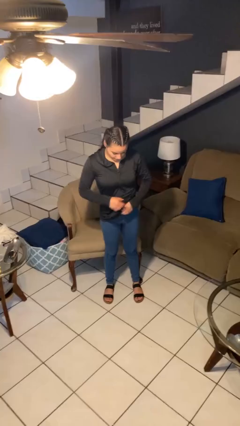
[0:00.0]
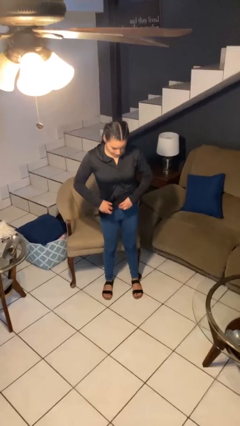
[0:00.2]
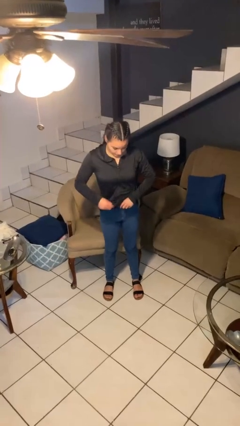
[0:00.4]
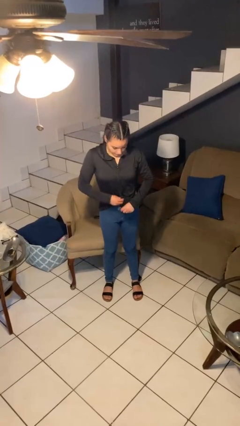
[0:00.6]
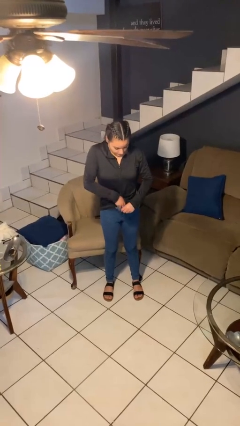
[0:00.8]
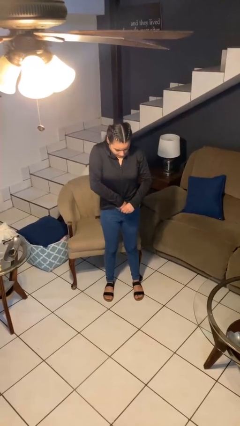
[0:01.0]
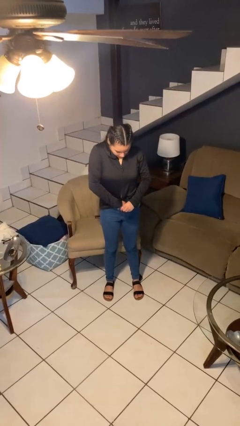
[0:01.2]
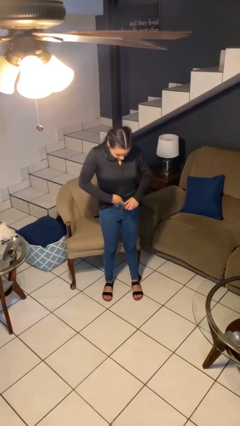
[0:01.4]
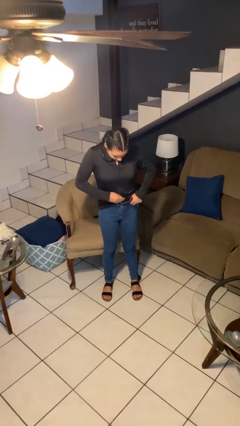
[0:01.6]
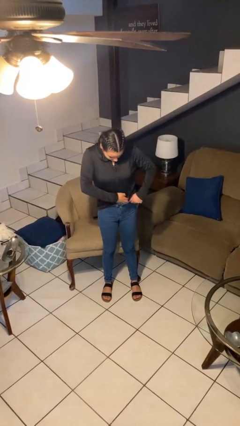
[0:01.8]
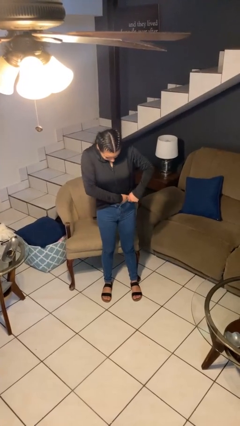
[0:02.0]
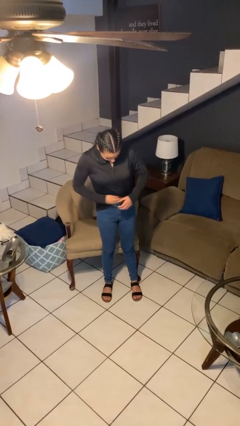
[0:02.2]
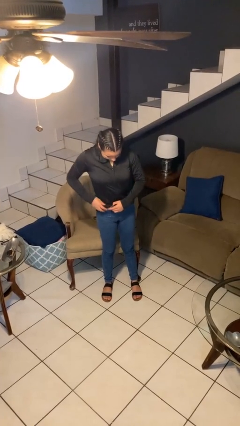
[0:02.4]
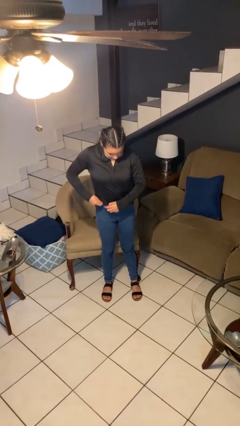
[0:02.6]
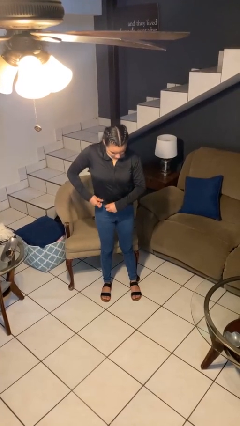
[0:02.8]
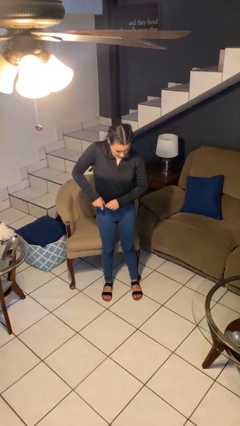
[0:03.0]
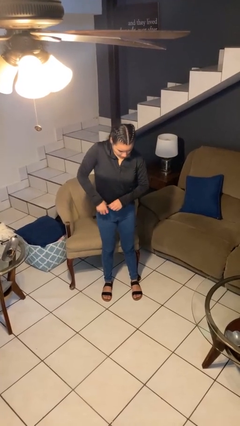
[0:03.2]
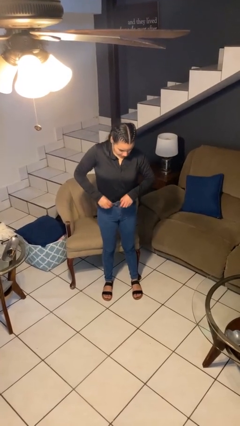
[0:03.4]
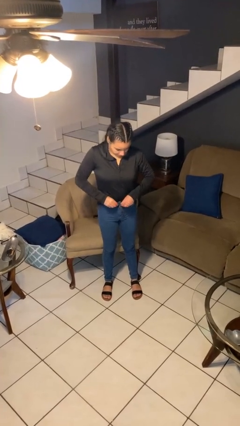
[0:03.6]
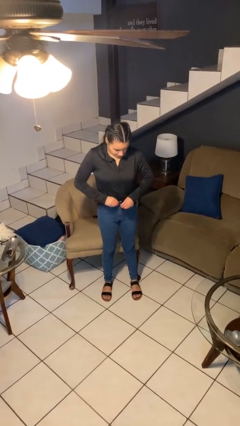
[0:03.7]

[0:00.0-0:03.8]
person tucks in shirt

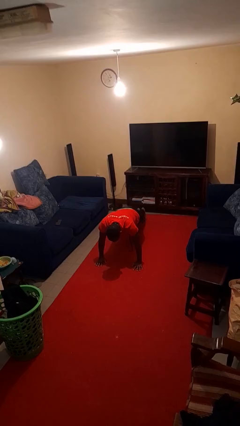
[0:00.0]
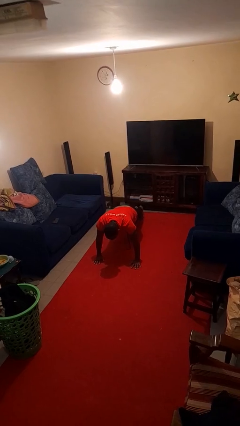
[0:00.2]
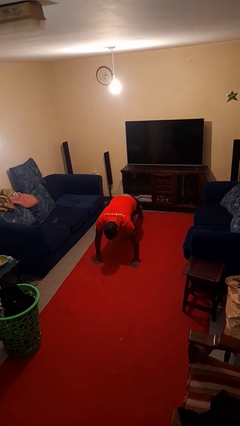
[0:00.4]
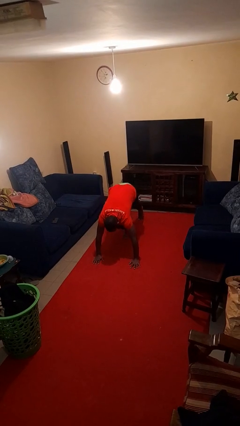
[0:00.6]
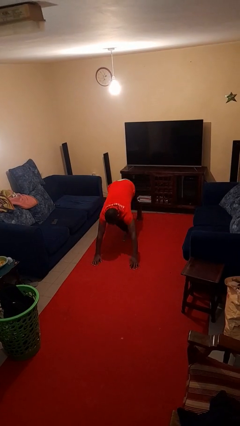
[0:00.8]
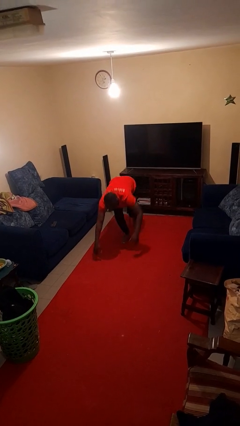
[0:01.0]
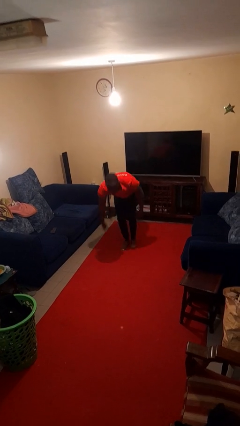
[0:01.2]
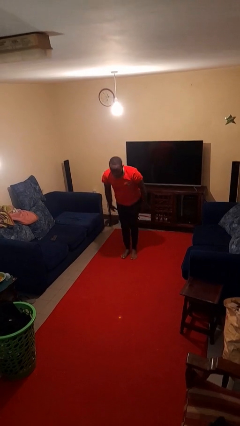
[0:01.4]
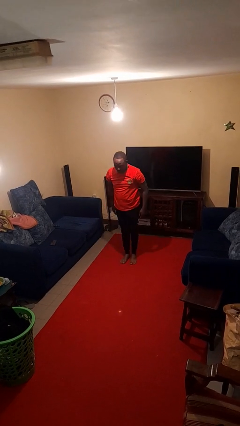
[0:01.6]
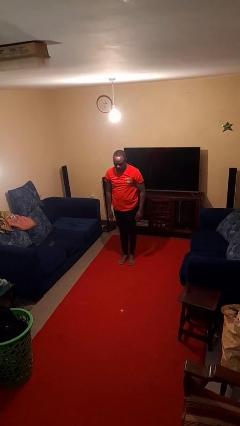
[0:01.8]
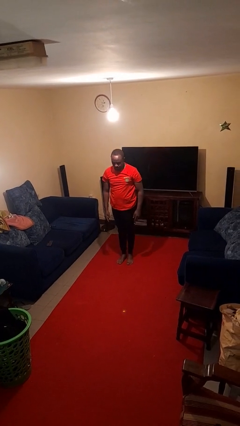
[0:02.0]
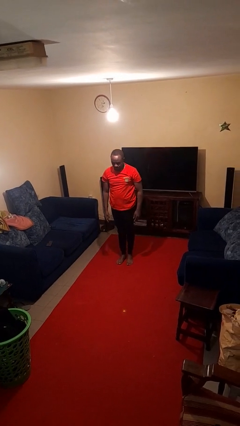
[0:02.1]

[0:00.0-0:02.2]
person stands up from floor

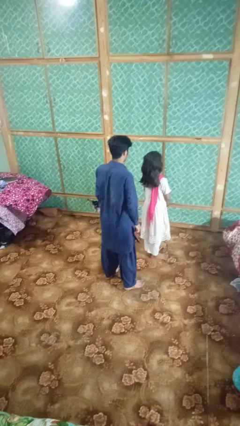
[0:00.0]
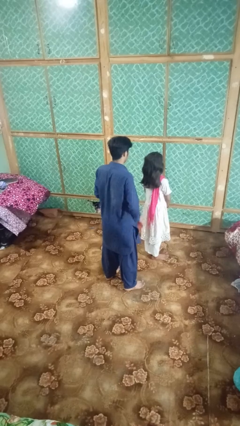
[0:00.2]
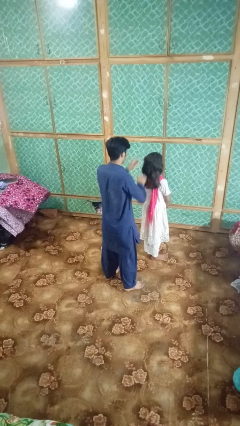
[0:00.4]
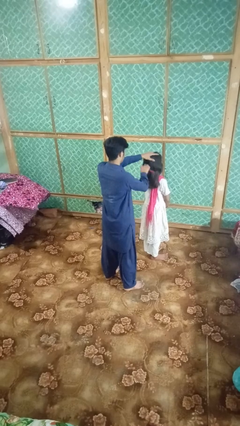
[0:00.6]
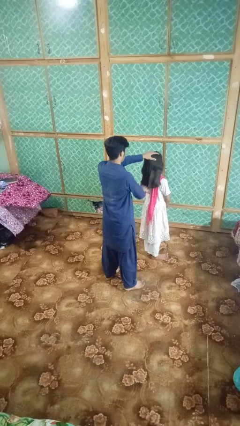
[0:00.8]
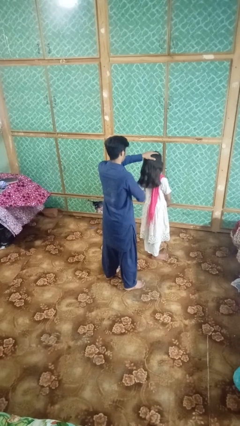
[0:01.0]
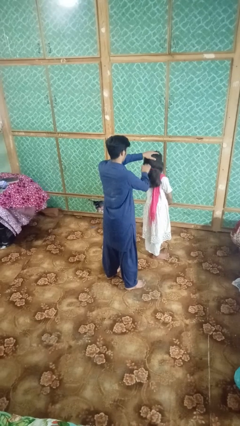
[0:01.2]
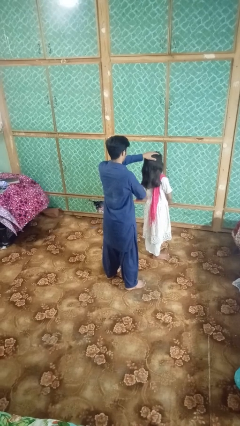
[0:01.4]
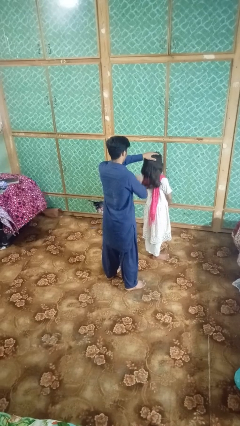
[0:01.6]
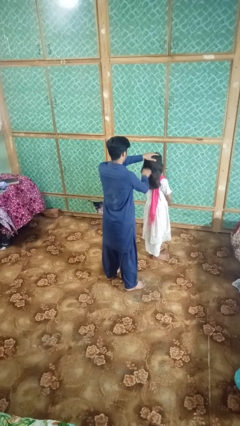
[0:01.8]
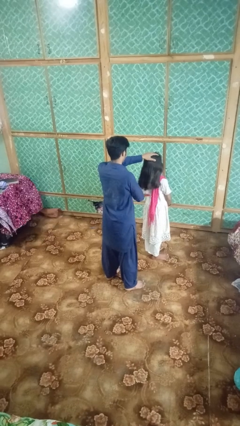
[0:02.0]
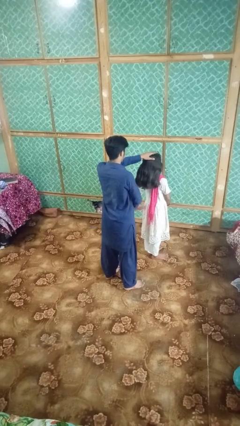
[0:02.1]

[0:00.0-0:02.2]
person brushes hair of person

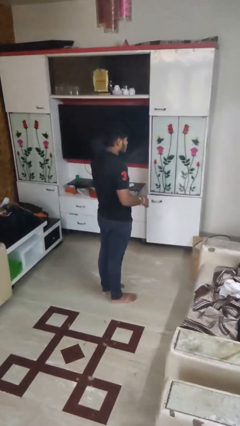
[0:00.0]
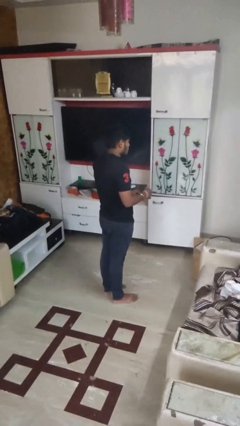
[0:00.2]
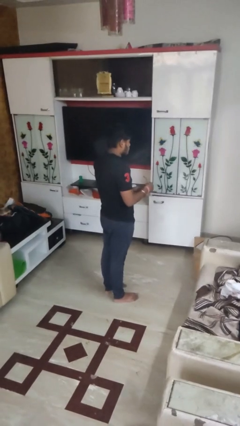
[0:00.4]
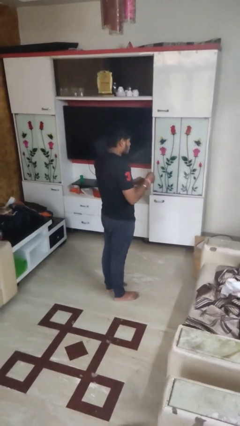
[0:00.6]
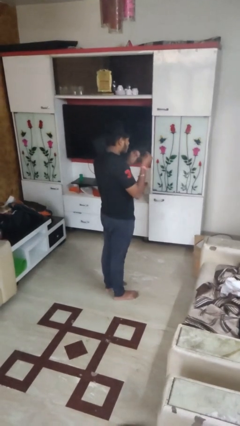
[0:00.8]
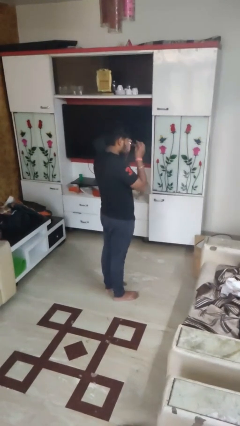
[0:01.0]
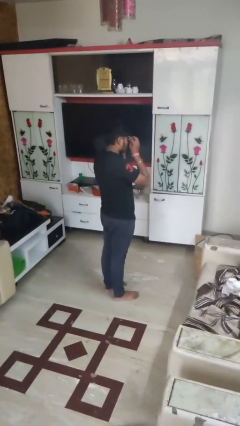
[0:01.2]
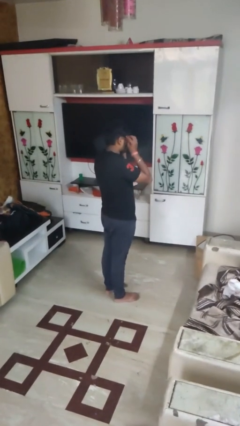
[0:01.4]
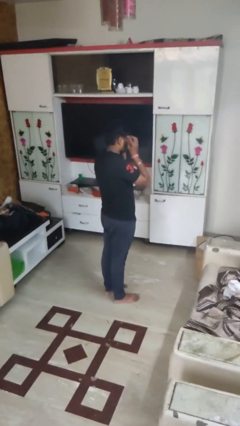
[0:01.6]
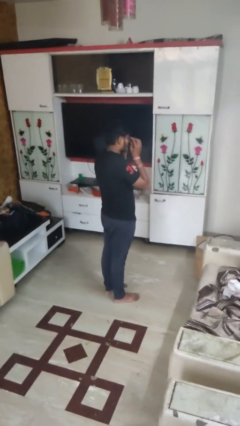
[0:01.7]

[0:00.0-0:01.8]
person puts on glasses

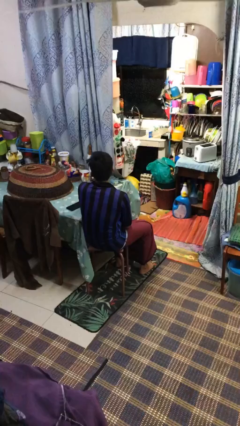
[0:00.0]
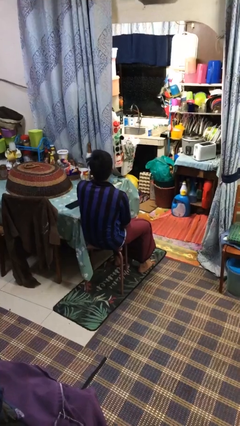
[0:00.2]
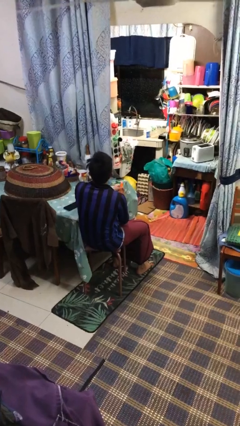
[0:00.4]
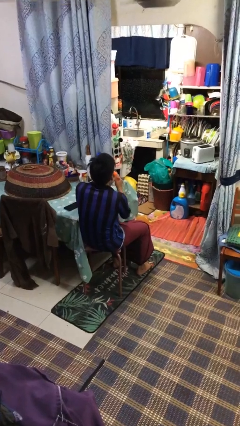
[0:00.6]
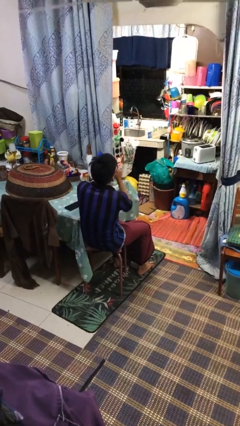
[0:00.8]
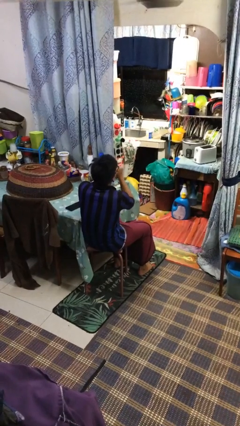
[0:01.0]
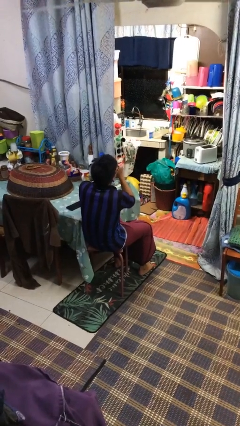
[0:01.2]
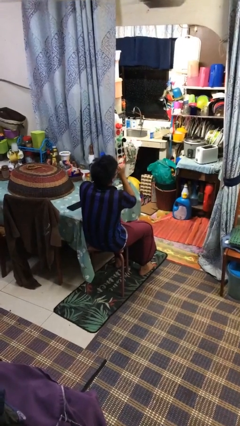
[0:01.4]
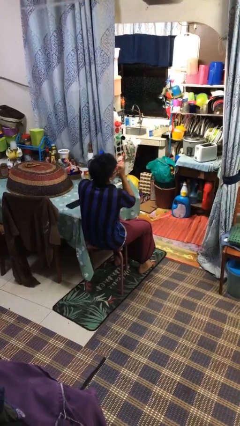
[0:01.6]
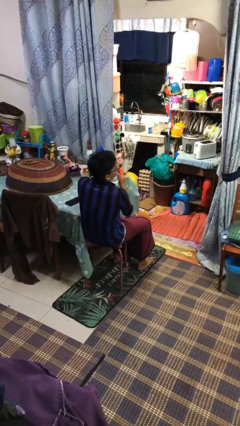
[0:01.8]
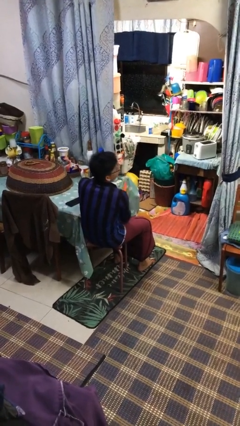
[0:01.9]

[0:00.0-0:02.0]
person vapes

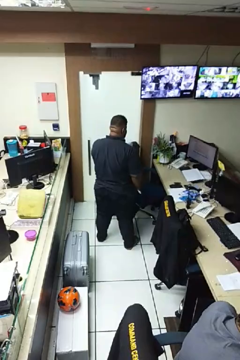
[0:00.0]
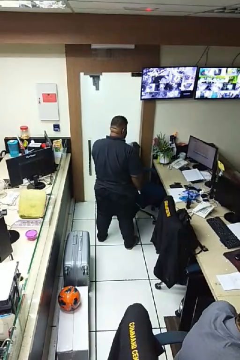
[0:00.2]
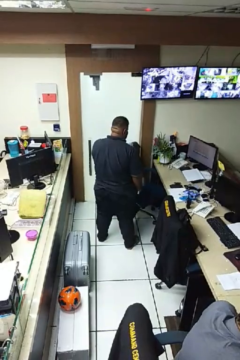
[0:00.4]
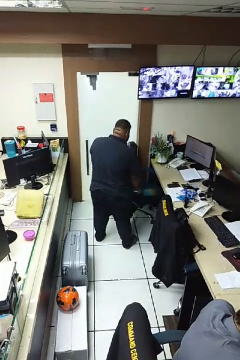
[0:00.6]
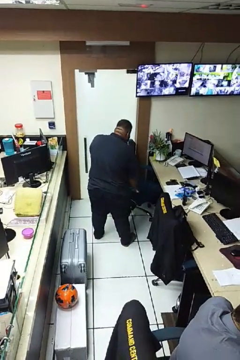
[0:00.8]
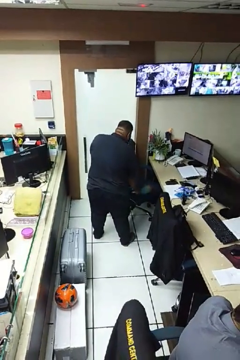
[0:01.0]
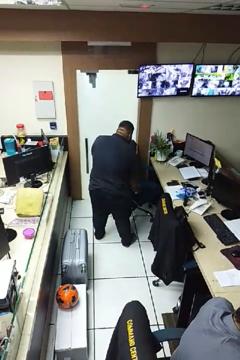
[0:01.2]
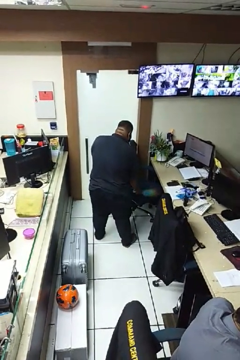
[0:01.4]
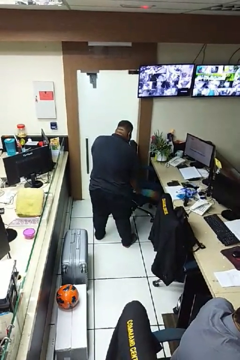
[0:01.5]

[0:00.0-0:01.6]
person dusts furniture

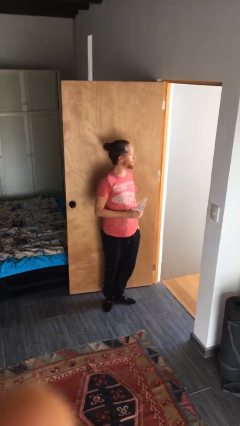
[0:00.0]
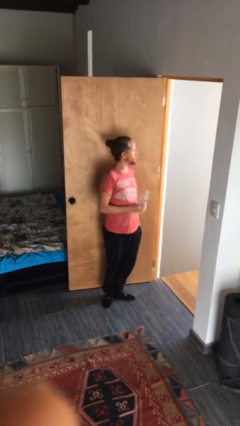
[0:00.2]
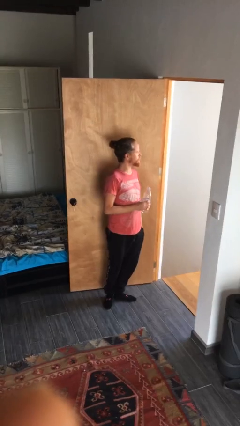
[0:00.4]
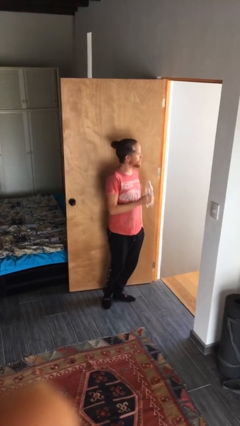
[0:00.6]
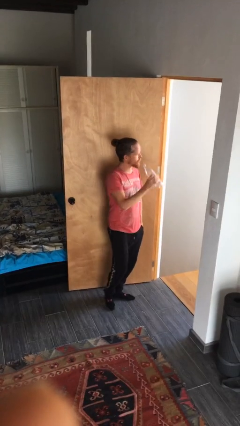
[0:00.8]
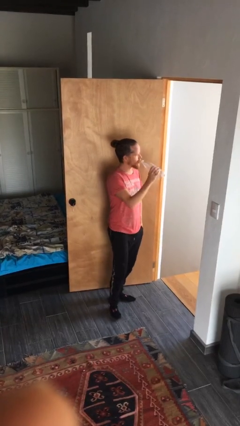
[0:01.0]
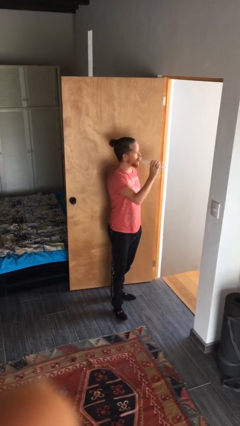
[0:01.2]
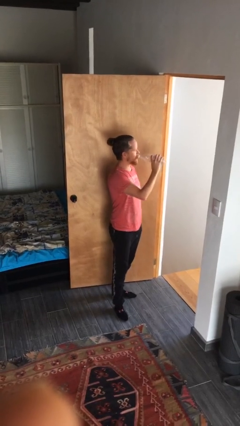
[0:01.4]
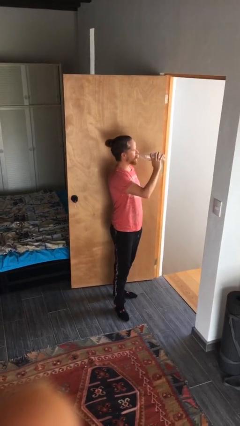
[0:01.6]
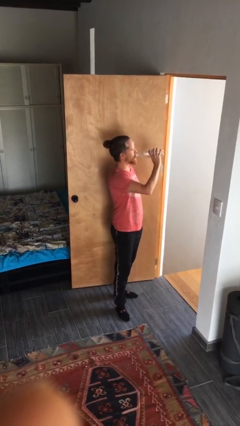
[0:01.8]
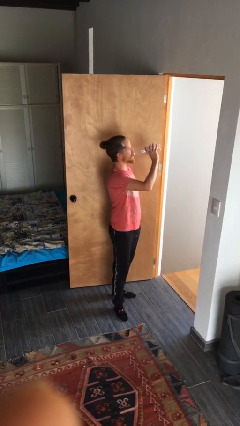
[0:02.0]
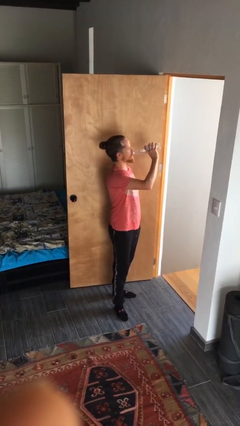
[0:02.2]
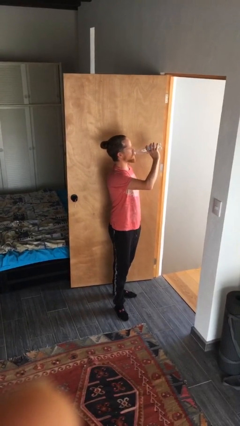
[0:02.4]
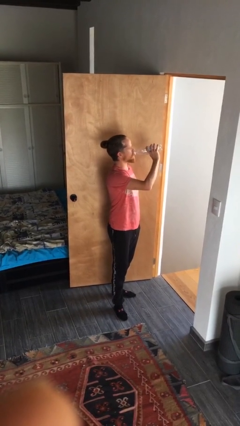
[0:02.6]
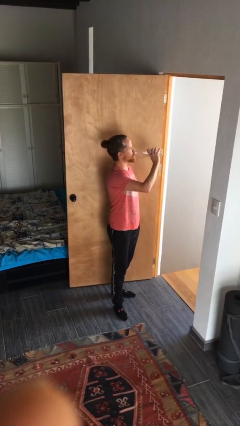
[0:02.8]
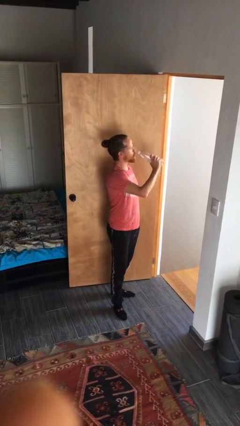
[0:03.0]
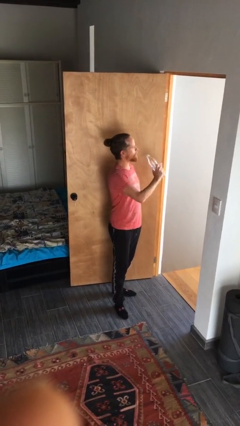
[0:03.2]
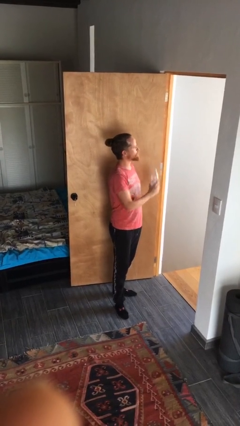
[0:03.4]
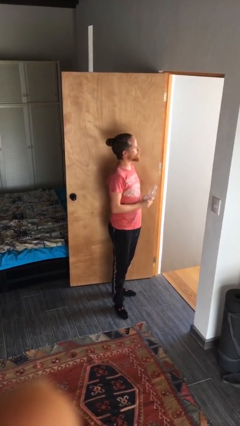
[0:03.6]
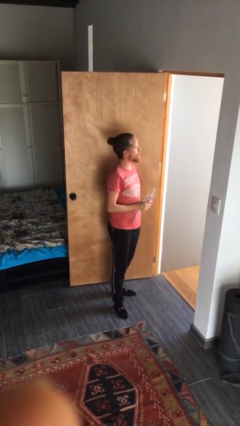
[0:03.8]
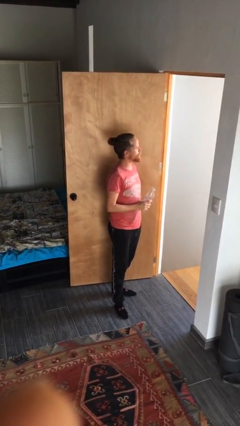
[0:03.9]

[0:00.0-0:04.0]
person drinks from bottle
